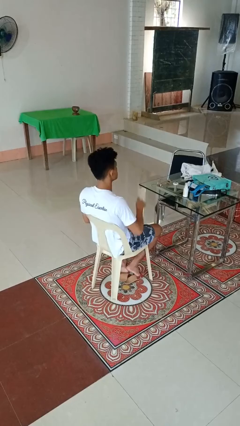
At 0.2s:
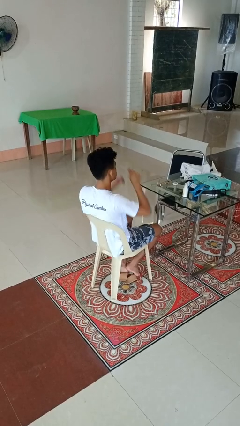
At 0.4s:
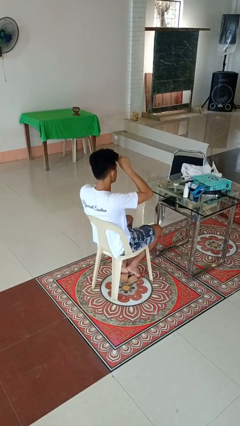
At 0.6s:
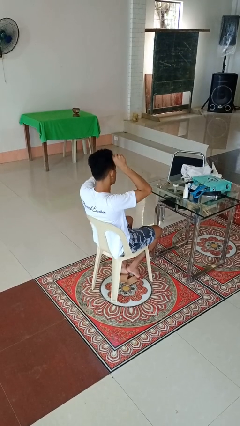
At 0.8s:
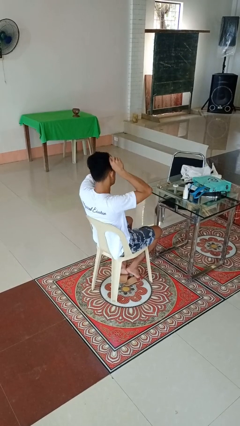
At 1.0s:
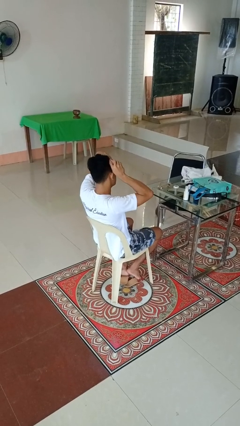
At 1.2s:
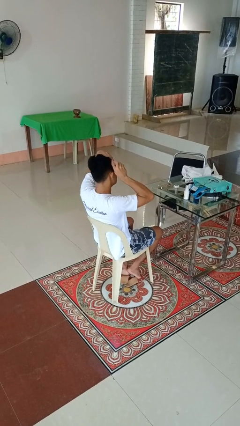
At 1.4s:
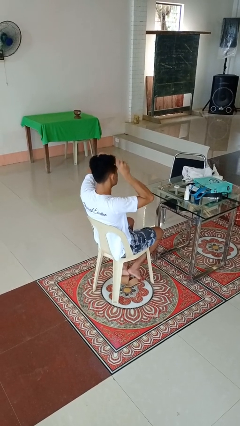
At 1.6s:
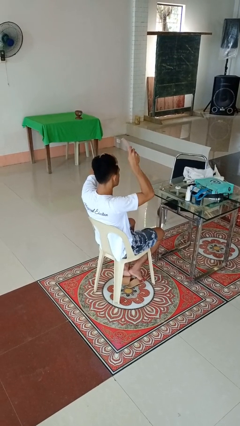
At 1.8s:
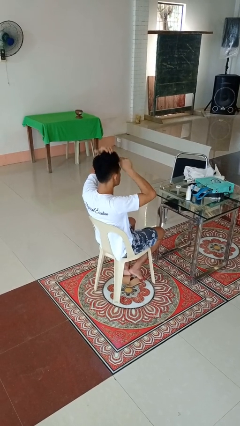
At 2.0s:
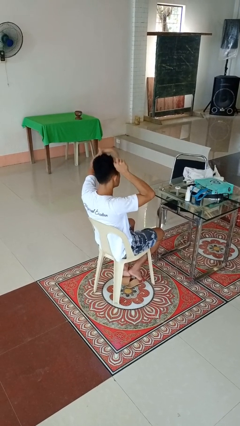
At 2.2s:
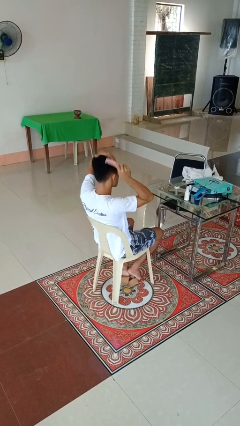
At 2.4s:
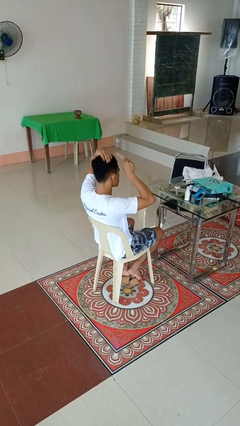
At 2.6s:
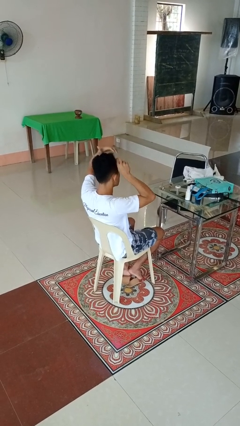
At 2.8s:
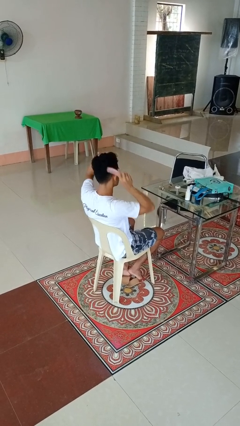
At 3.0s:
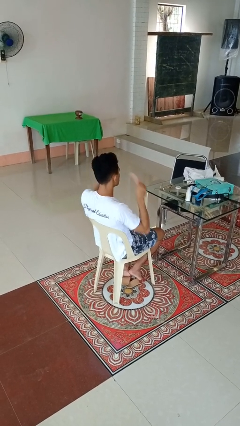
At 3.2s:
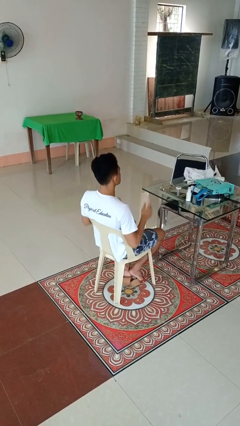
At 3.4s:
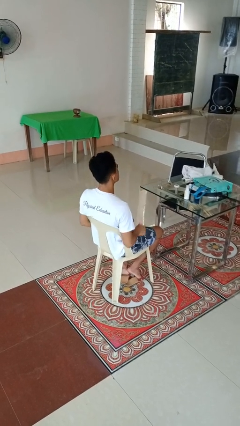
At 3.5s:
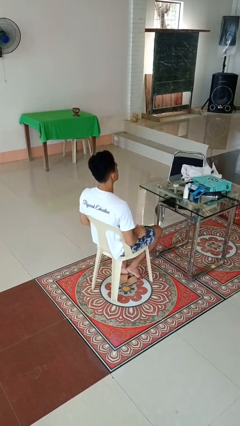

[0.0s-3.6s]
person brushes hair

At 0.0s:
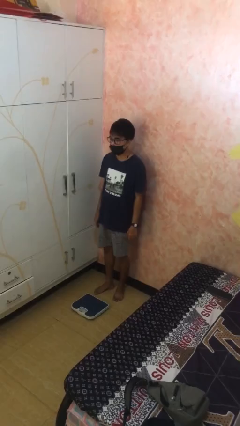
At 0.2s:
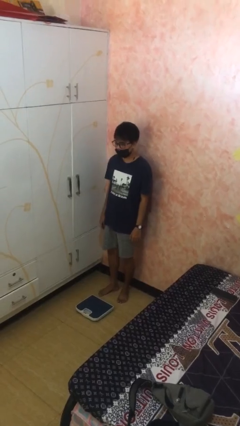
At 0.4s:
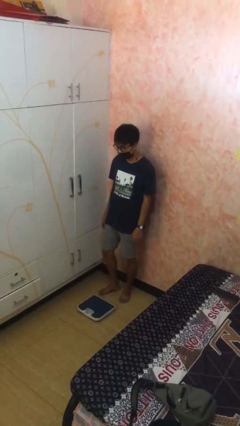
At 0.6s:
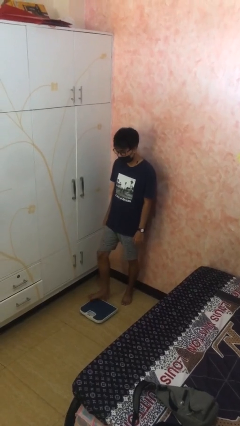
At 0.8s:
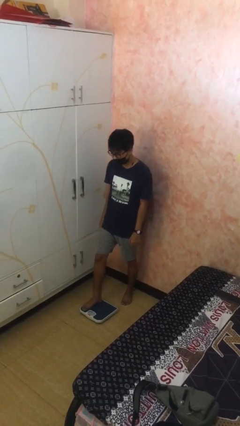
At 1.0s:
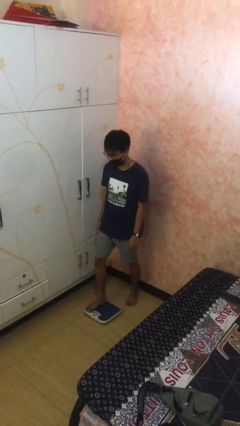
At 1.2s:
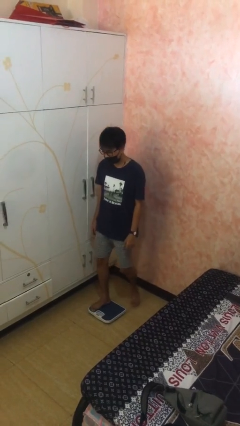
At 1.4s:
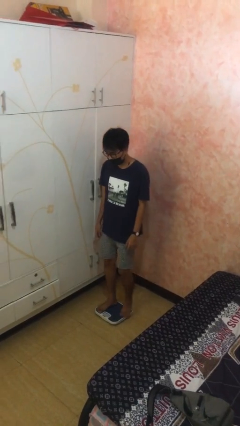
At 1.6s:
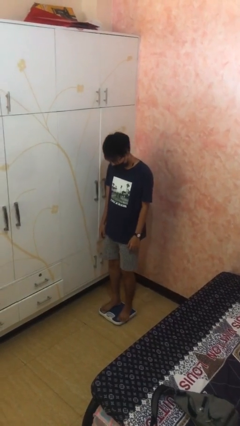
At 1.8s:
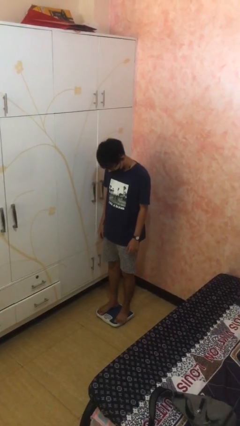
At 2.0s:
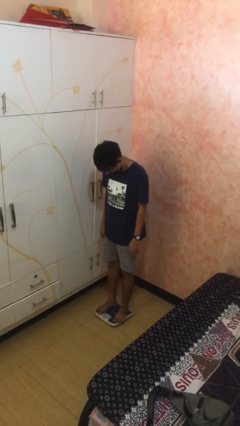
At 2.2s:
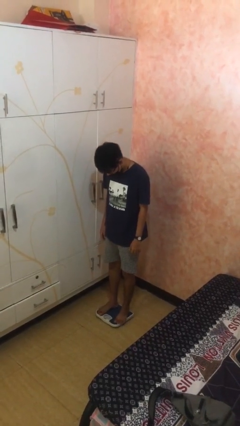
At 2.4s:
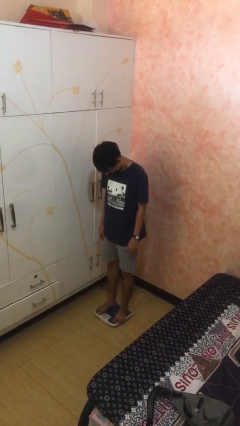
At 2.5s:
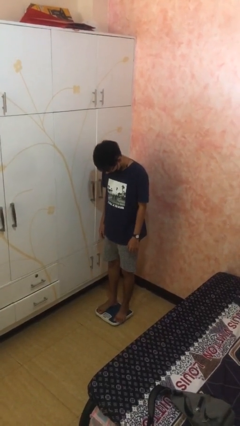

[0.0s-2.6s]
person uses bodyweight scale

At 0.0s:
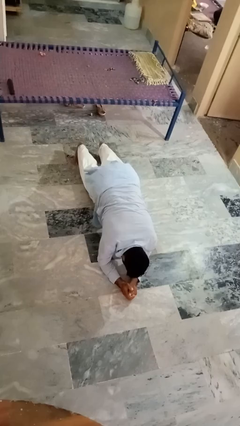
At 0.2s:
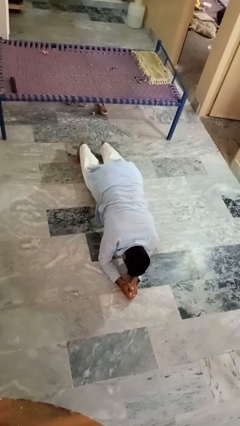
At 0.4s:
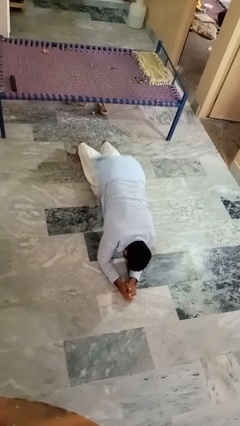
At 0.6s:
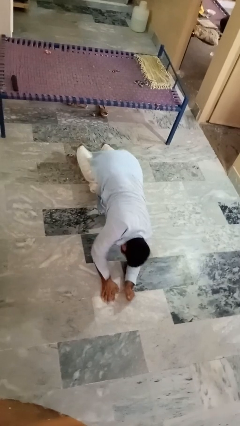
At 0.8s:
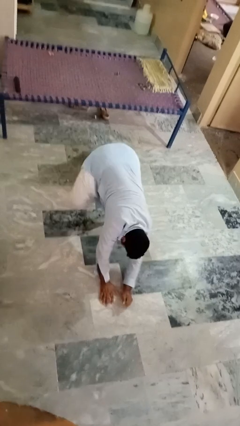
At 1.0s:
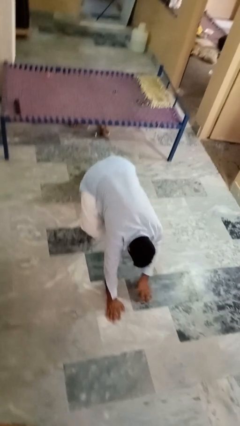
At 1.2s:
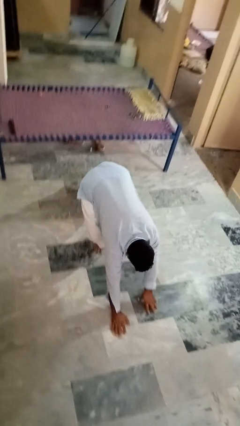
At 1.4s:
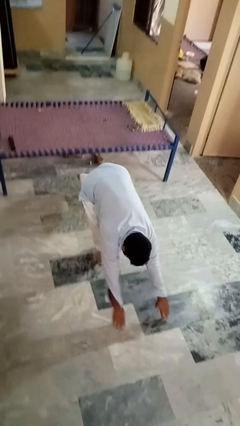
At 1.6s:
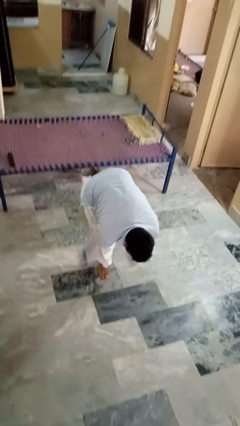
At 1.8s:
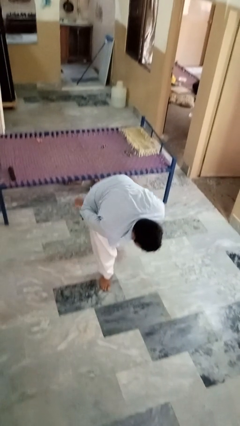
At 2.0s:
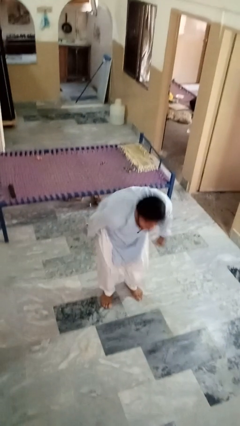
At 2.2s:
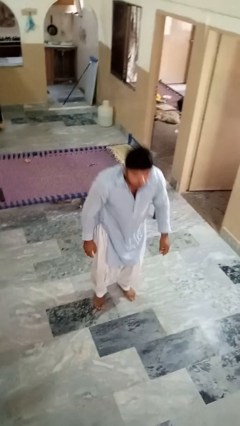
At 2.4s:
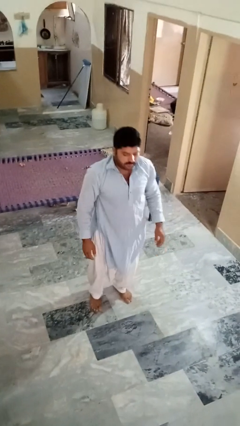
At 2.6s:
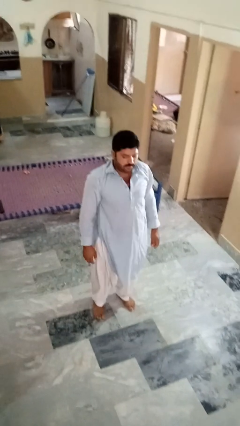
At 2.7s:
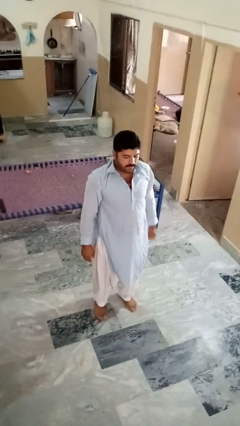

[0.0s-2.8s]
person stands up from floor

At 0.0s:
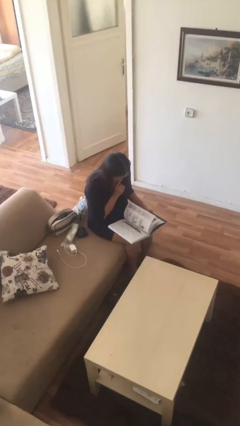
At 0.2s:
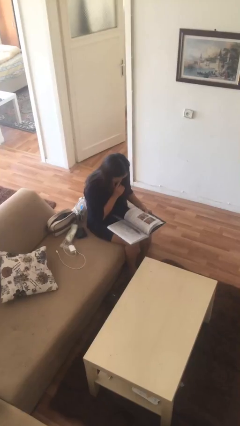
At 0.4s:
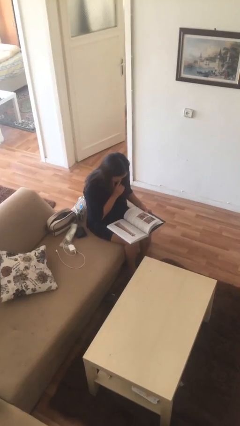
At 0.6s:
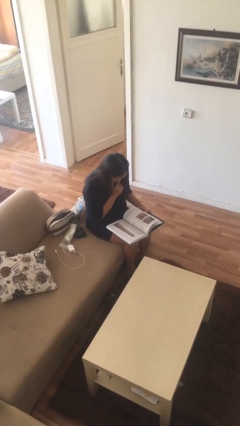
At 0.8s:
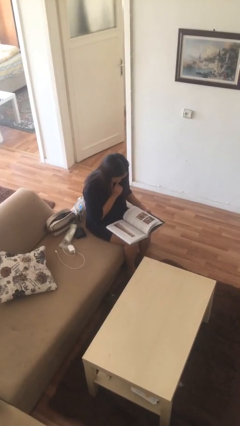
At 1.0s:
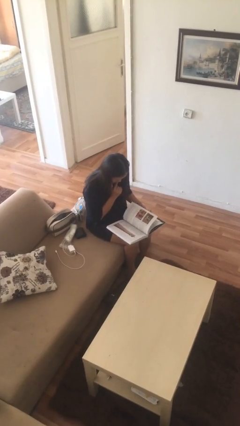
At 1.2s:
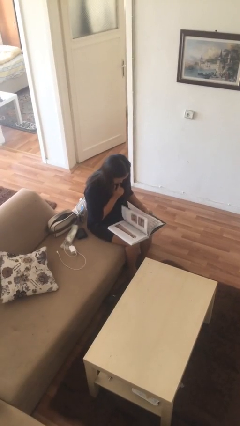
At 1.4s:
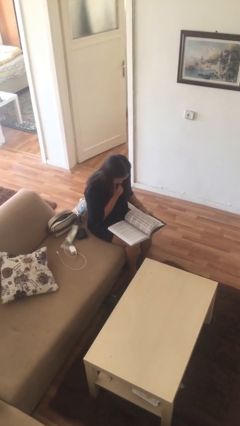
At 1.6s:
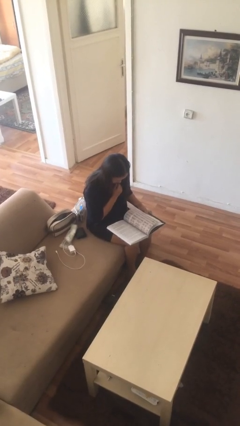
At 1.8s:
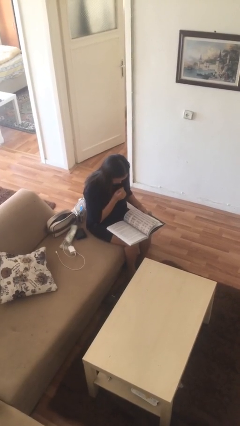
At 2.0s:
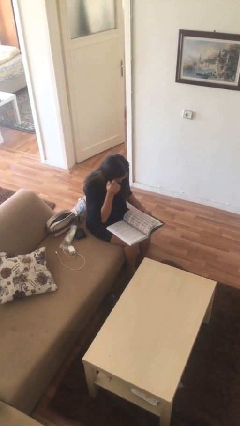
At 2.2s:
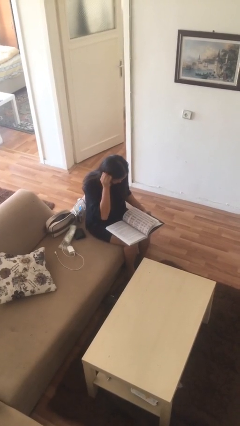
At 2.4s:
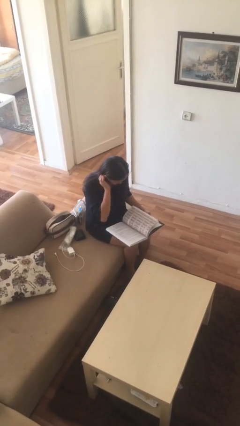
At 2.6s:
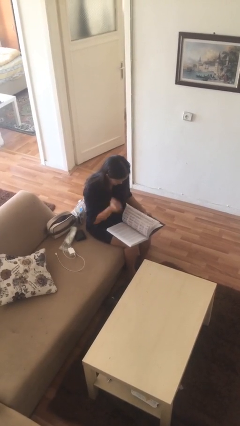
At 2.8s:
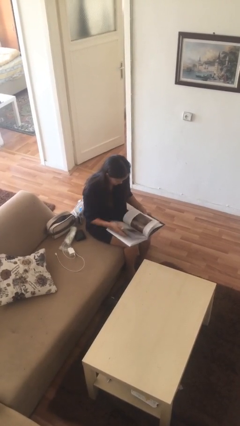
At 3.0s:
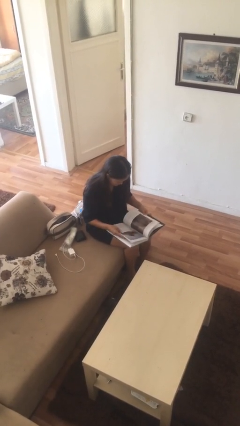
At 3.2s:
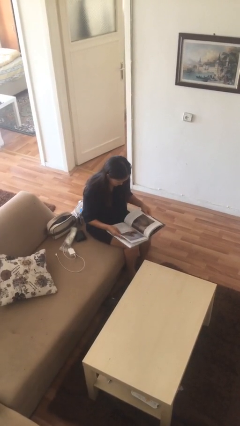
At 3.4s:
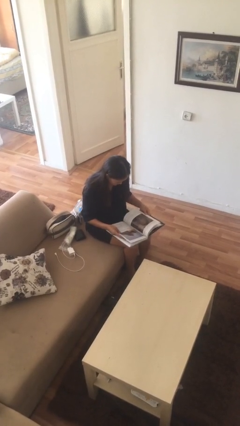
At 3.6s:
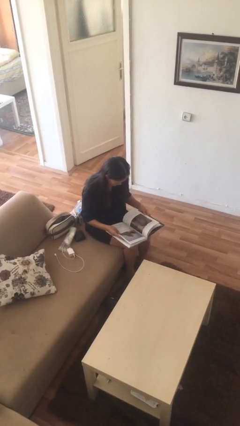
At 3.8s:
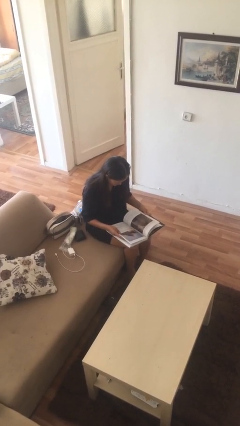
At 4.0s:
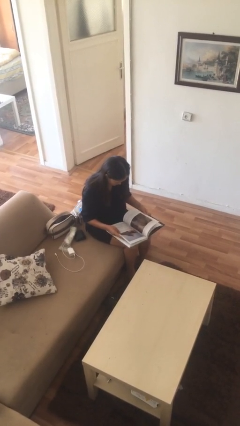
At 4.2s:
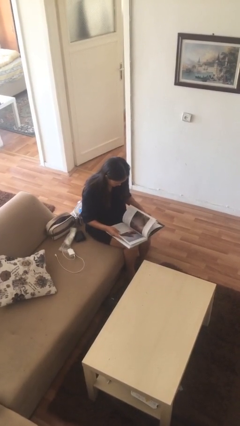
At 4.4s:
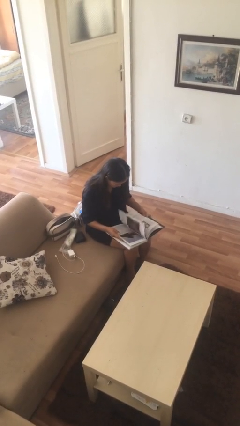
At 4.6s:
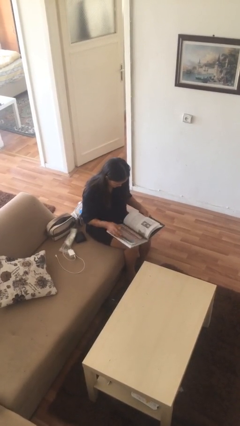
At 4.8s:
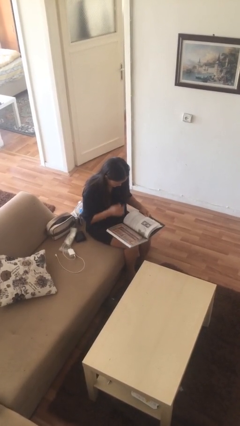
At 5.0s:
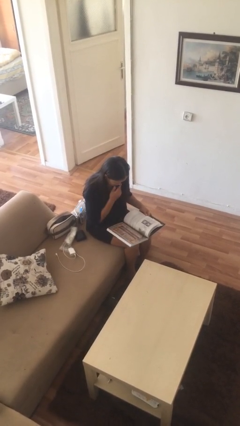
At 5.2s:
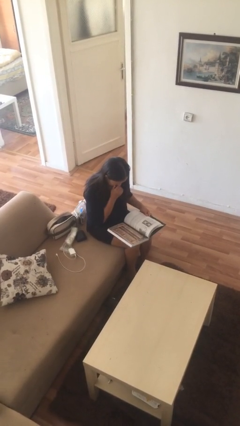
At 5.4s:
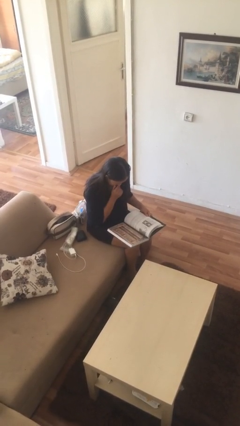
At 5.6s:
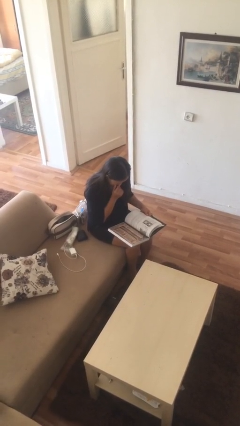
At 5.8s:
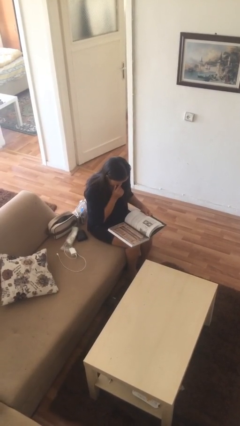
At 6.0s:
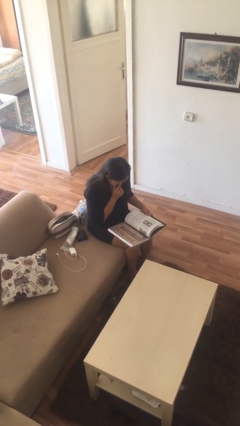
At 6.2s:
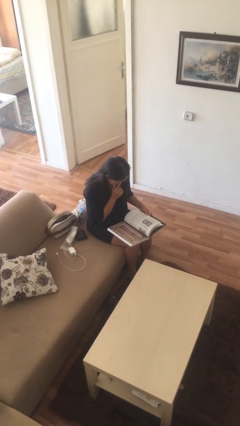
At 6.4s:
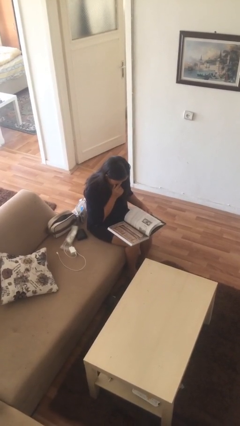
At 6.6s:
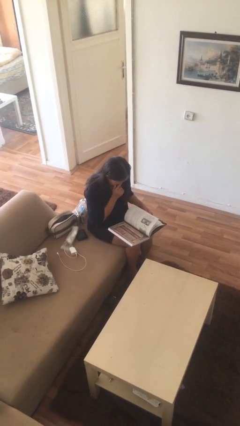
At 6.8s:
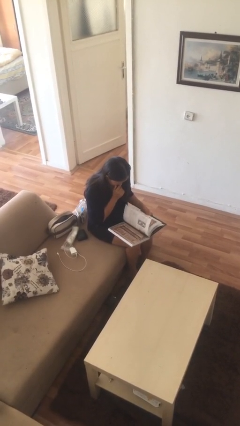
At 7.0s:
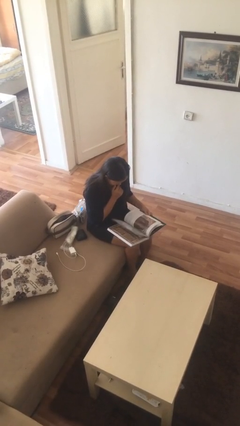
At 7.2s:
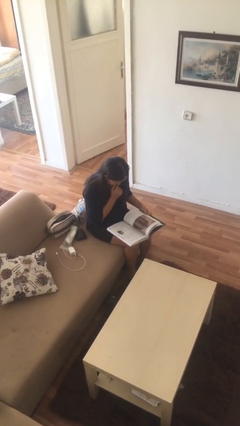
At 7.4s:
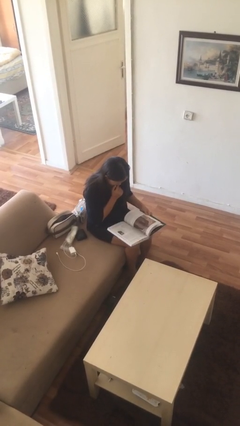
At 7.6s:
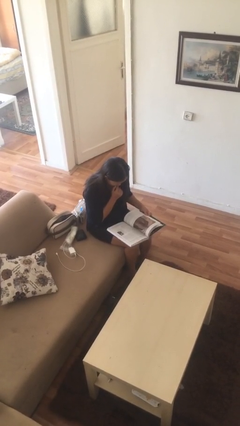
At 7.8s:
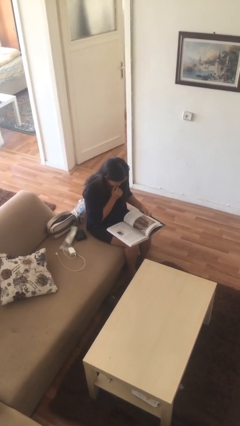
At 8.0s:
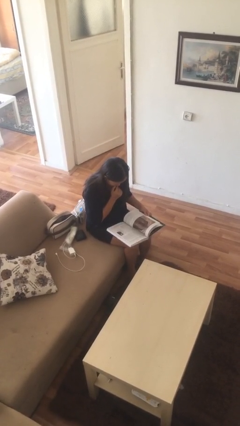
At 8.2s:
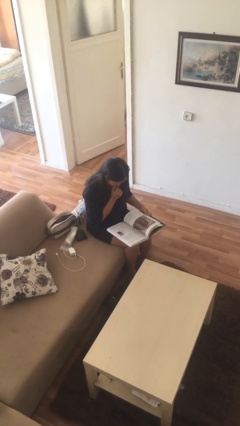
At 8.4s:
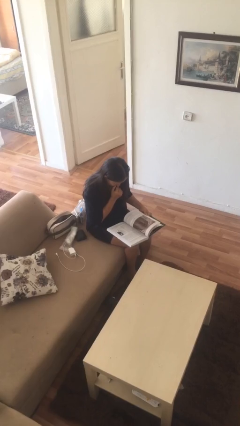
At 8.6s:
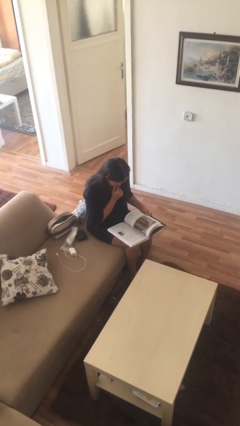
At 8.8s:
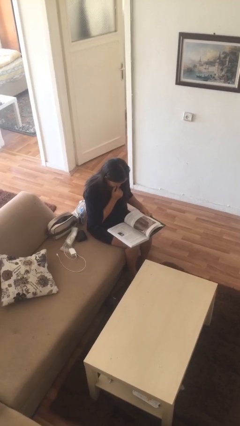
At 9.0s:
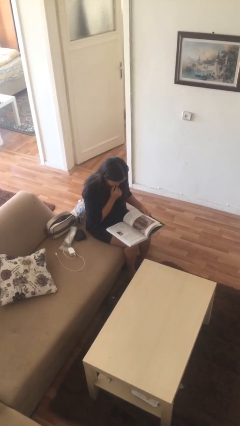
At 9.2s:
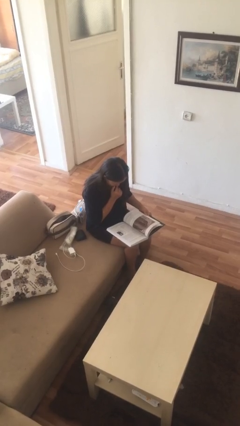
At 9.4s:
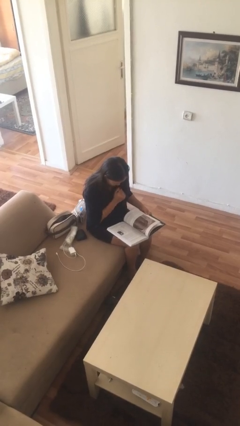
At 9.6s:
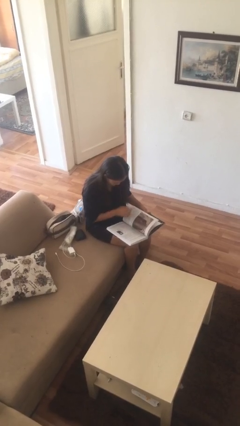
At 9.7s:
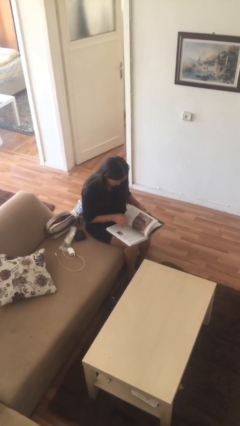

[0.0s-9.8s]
person reads document
